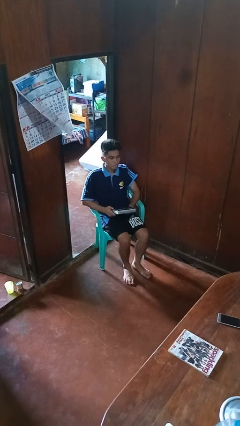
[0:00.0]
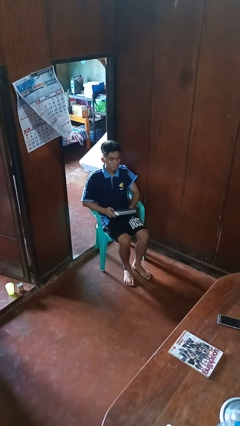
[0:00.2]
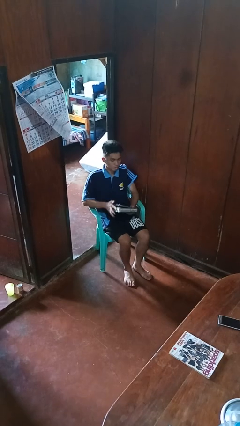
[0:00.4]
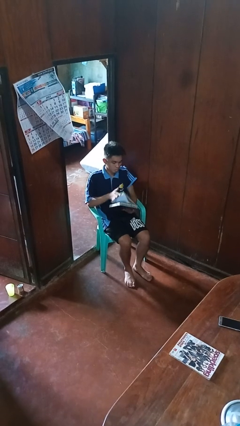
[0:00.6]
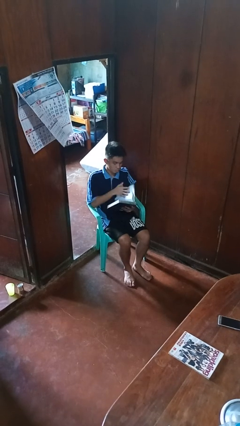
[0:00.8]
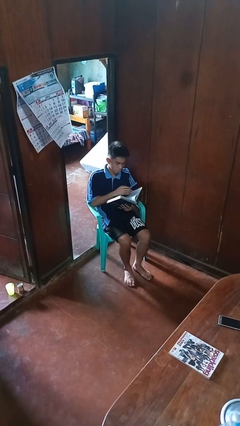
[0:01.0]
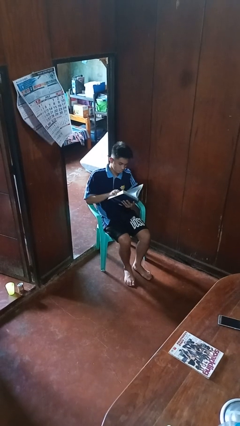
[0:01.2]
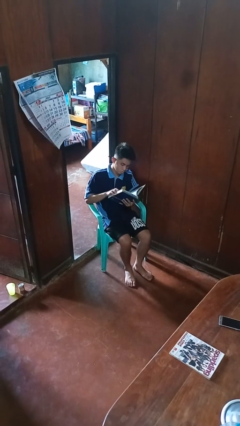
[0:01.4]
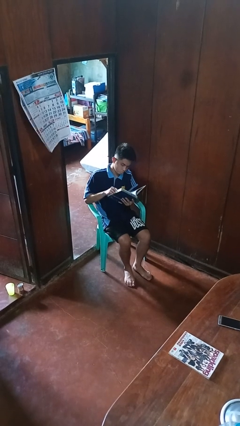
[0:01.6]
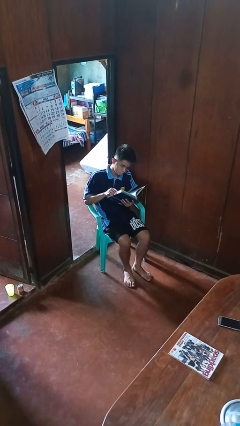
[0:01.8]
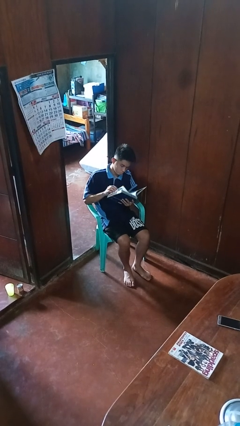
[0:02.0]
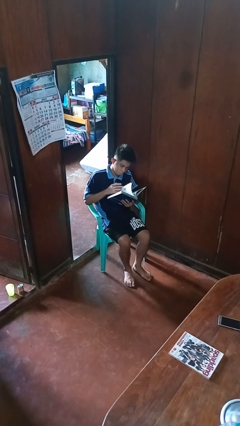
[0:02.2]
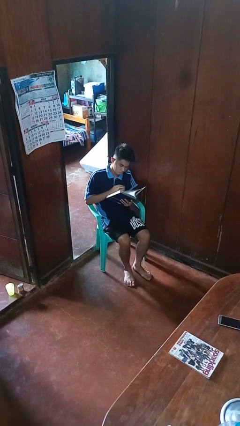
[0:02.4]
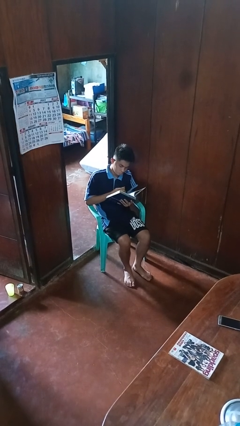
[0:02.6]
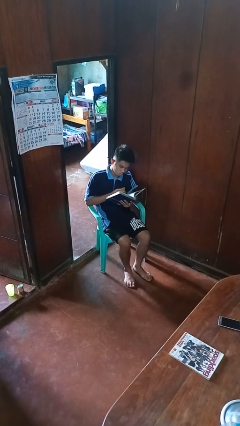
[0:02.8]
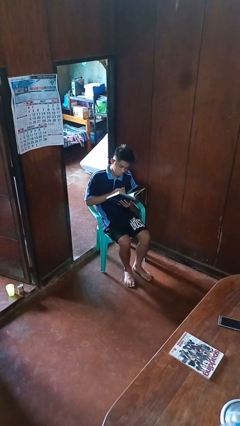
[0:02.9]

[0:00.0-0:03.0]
person reads book

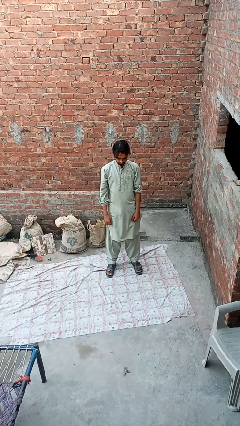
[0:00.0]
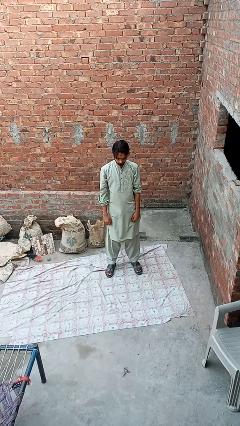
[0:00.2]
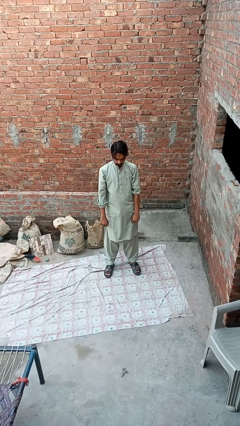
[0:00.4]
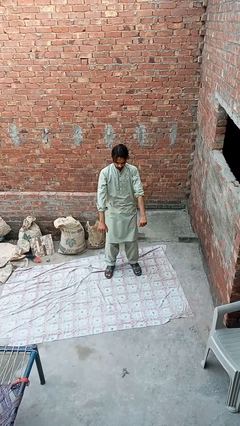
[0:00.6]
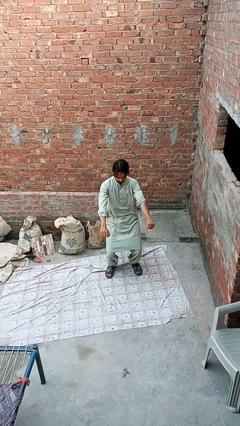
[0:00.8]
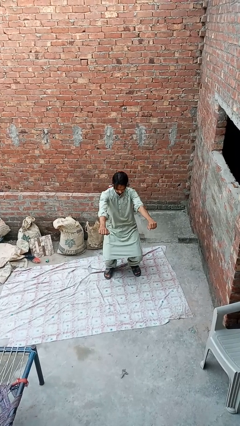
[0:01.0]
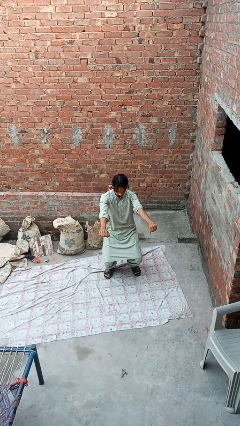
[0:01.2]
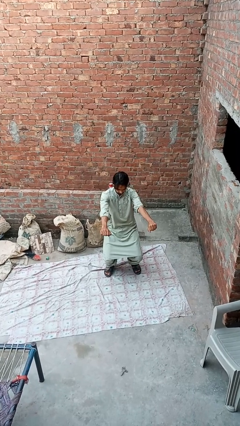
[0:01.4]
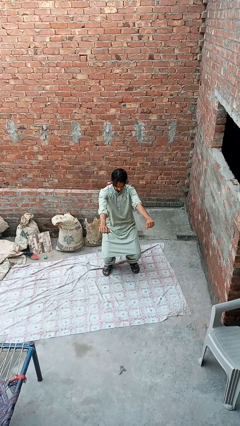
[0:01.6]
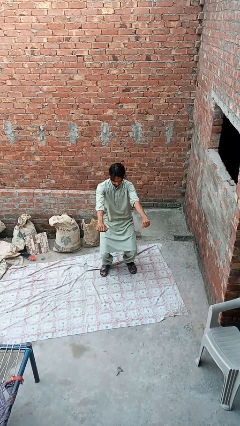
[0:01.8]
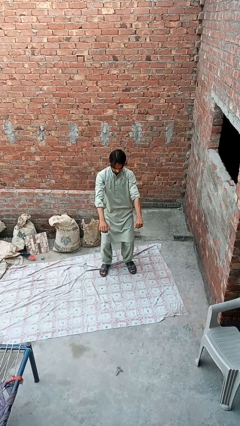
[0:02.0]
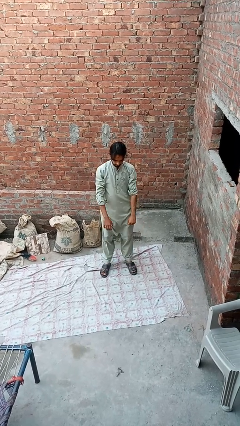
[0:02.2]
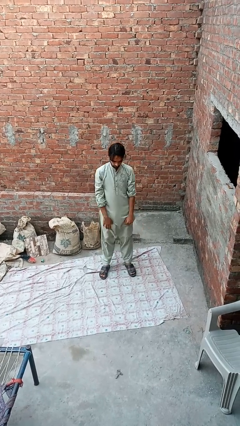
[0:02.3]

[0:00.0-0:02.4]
person squats

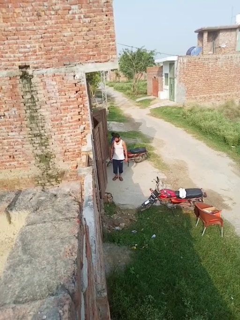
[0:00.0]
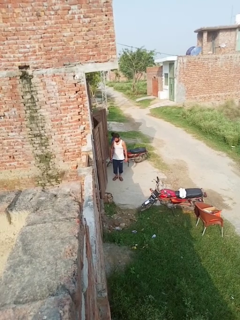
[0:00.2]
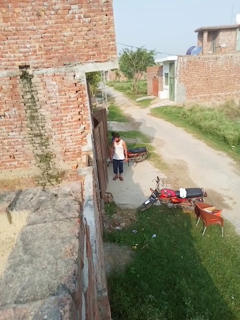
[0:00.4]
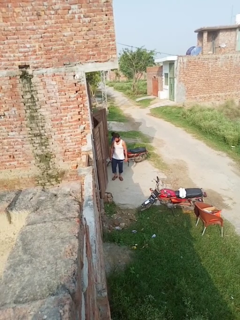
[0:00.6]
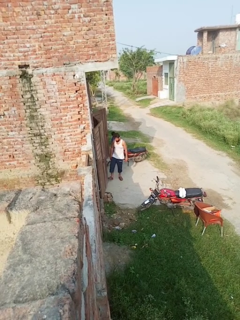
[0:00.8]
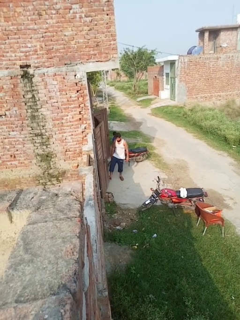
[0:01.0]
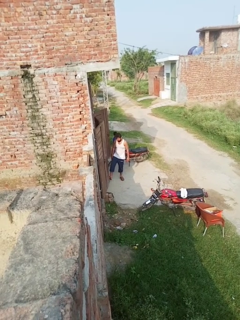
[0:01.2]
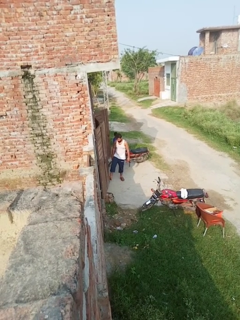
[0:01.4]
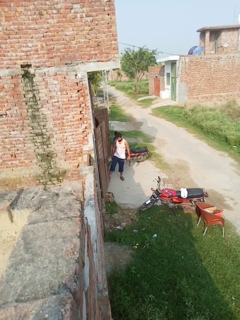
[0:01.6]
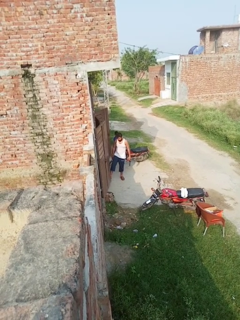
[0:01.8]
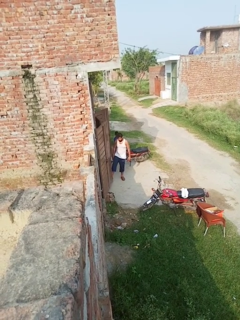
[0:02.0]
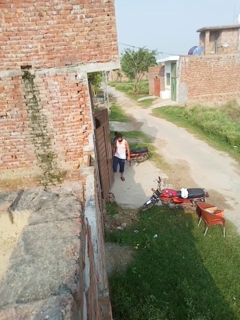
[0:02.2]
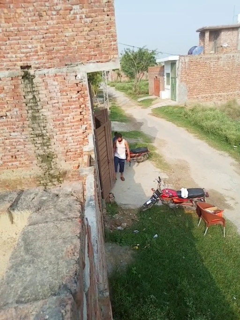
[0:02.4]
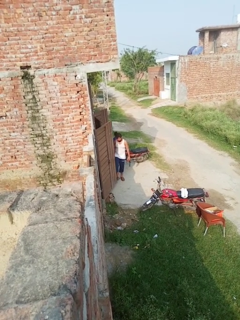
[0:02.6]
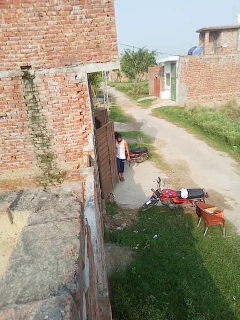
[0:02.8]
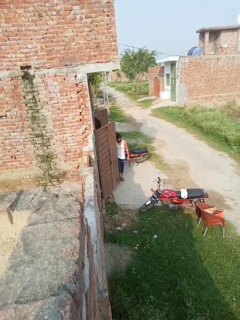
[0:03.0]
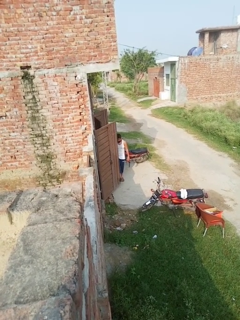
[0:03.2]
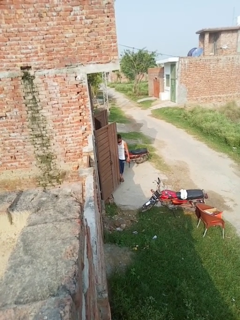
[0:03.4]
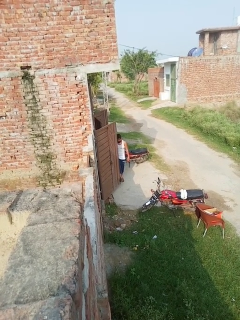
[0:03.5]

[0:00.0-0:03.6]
person opens facility door

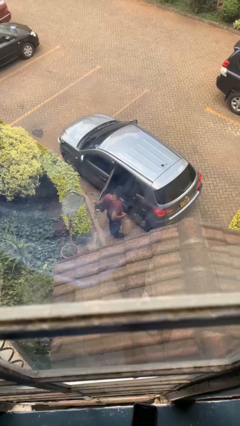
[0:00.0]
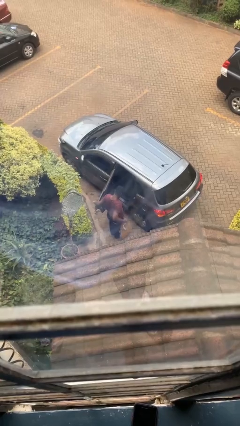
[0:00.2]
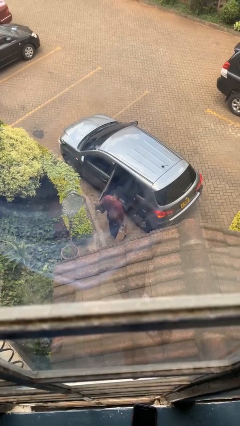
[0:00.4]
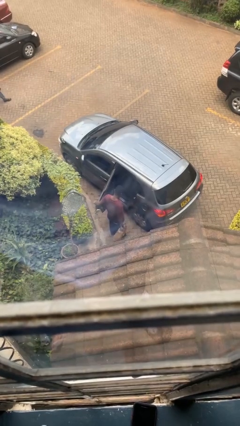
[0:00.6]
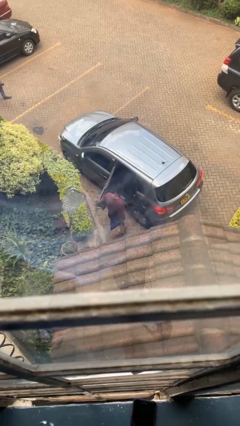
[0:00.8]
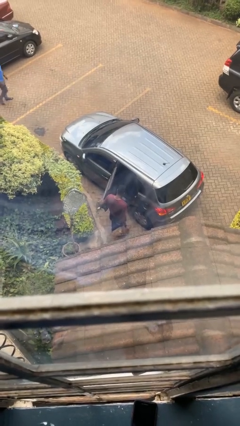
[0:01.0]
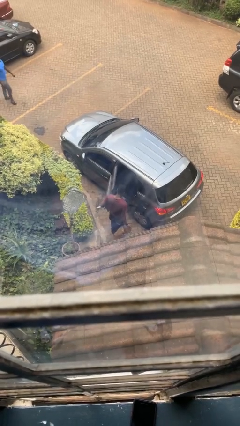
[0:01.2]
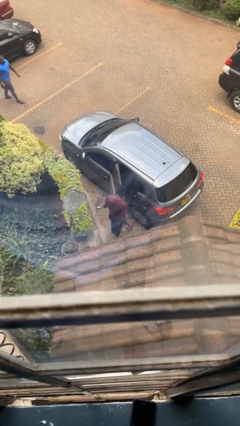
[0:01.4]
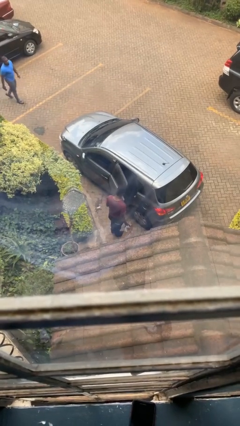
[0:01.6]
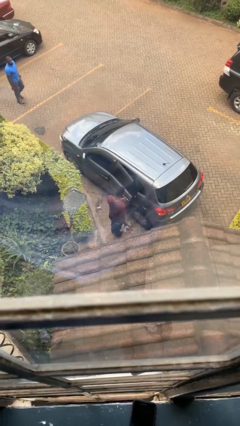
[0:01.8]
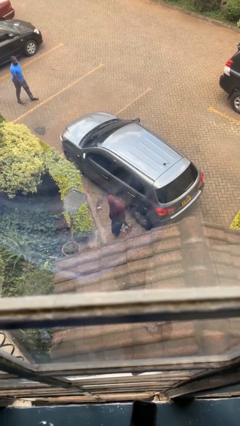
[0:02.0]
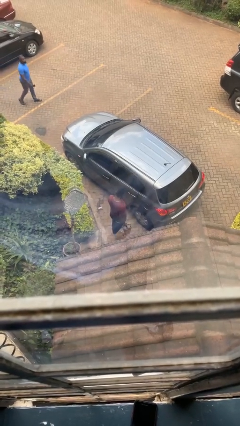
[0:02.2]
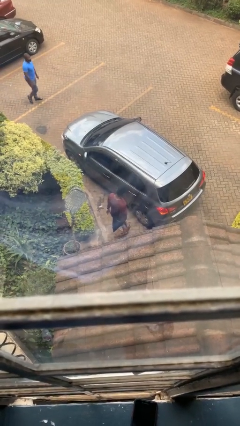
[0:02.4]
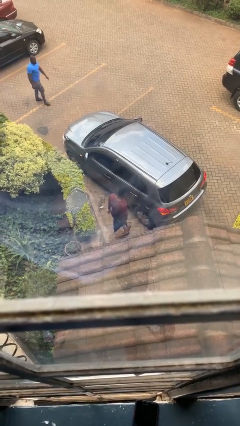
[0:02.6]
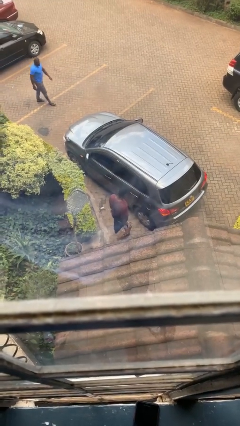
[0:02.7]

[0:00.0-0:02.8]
person closes car door

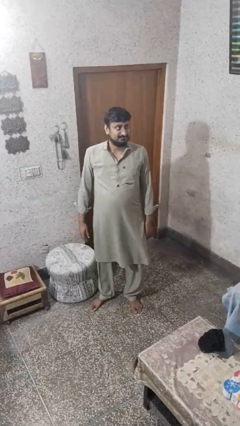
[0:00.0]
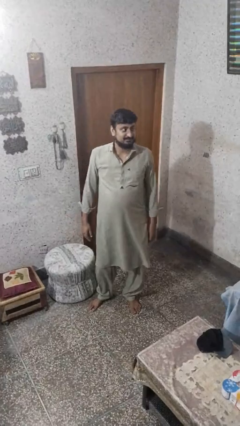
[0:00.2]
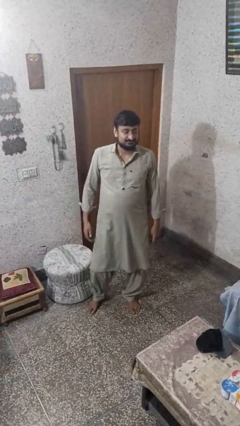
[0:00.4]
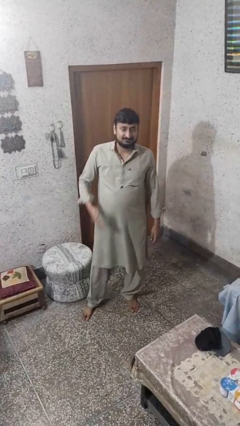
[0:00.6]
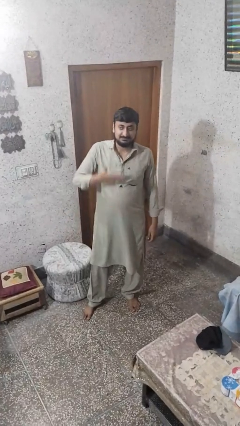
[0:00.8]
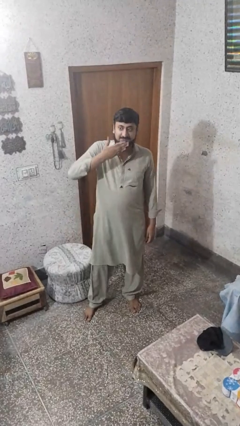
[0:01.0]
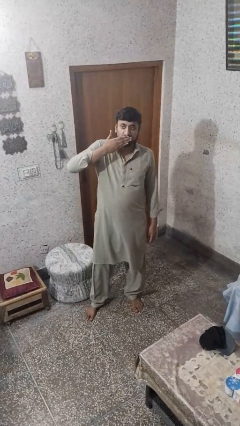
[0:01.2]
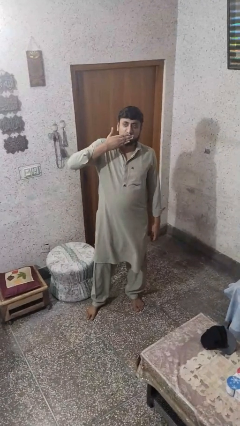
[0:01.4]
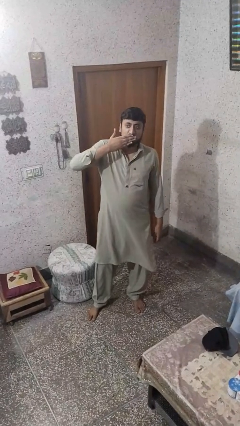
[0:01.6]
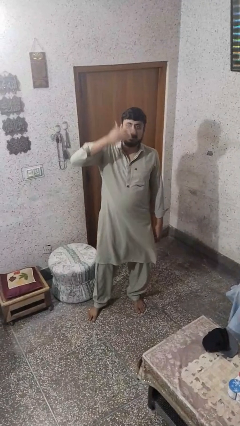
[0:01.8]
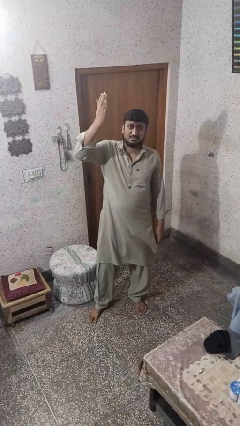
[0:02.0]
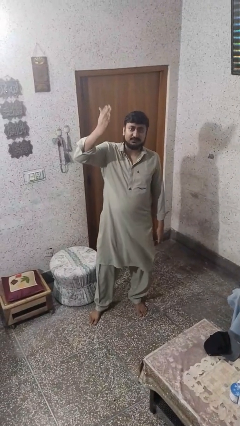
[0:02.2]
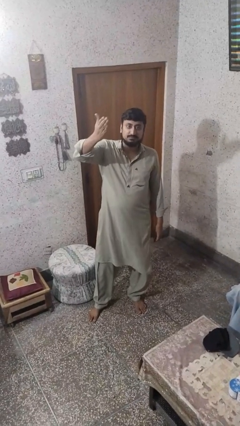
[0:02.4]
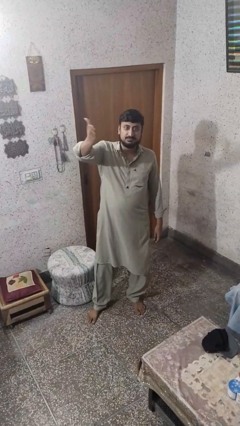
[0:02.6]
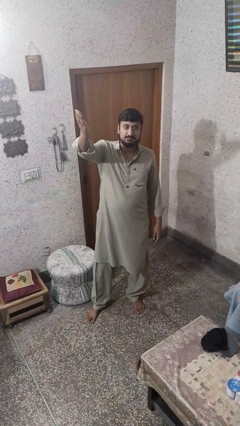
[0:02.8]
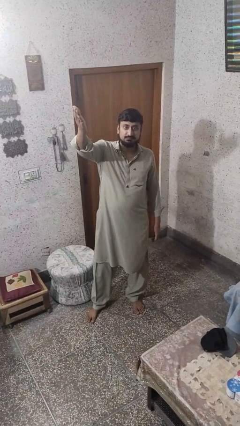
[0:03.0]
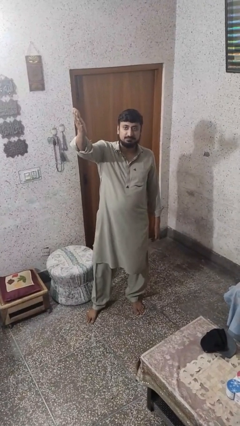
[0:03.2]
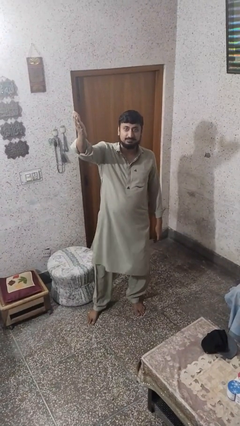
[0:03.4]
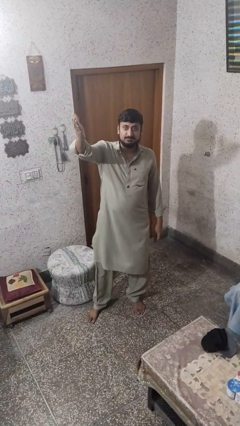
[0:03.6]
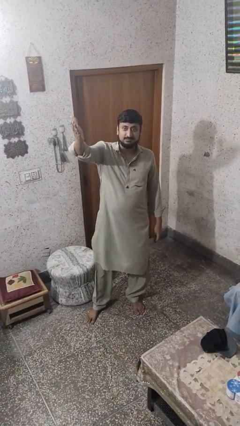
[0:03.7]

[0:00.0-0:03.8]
person gestures blow kiss

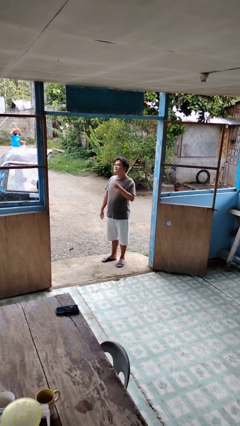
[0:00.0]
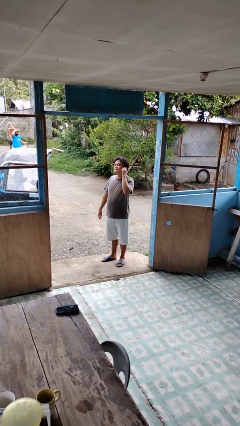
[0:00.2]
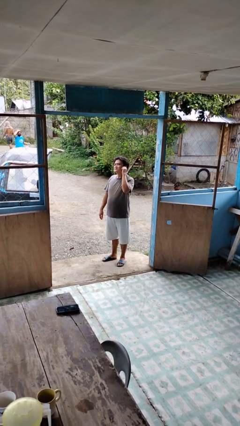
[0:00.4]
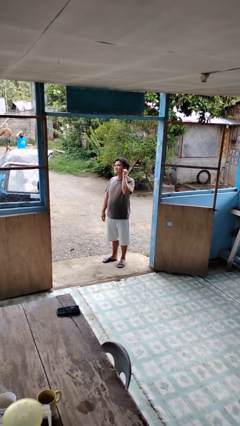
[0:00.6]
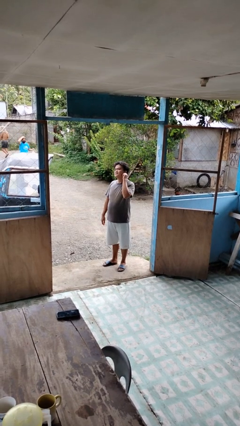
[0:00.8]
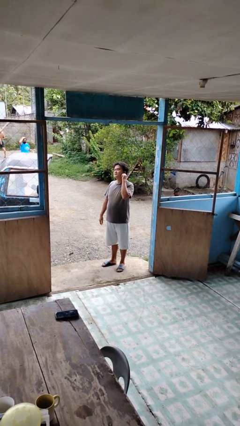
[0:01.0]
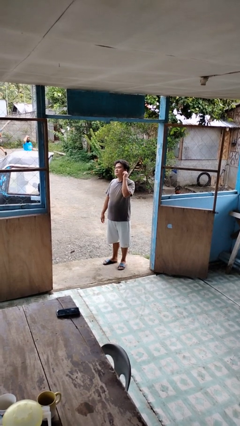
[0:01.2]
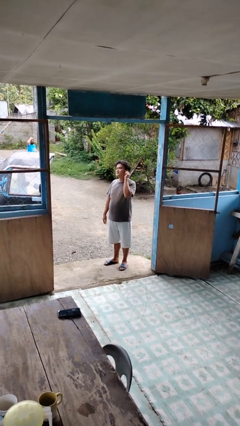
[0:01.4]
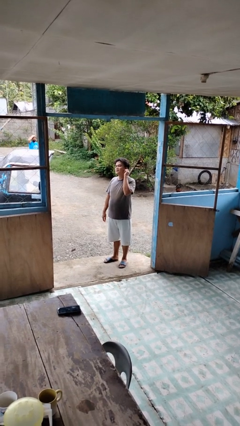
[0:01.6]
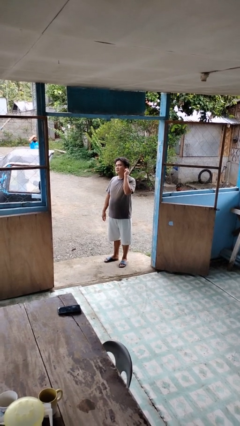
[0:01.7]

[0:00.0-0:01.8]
person touches earlobe

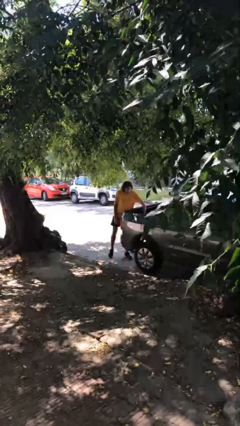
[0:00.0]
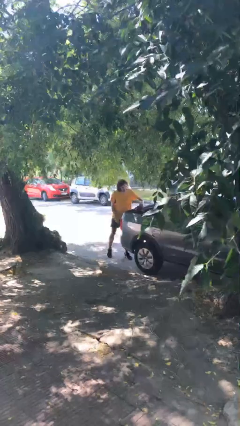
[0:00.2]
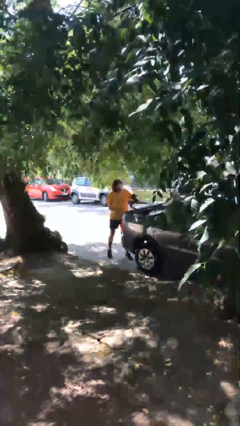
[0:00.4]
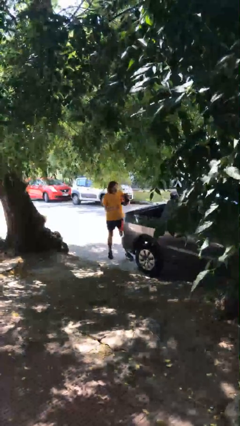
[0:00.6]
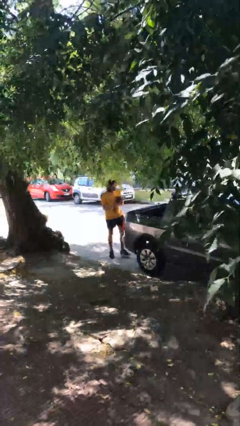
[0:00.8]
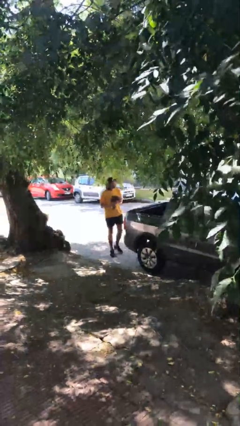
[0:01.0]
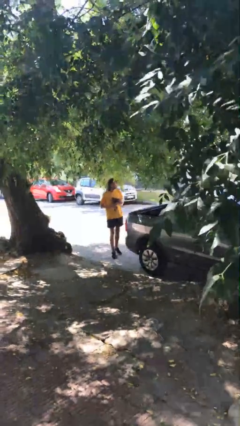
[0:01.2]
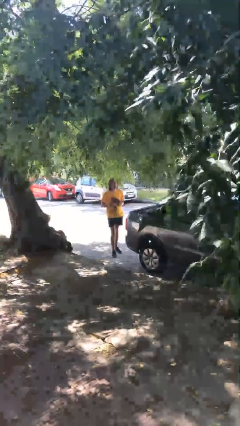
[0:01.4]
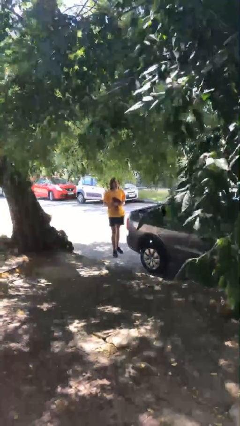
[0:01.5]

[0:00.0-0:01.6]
person unloads car
